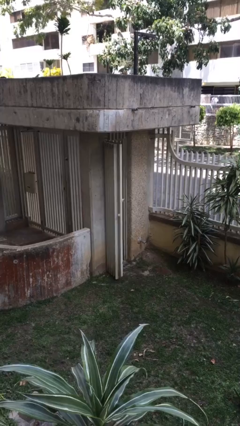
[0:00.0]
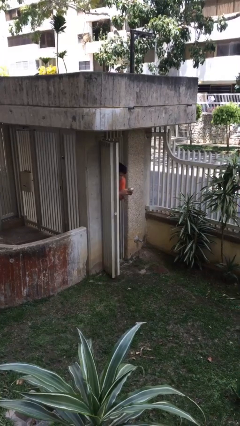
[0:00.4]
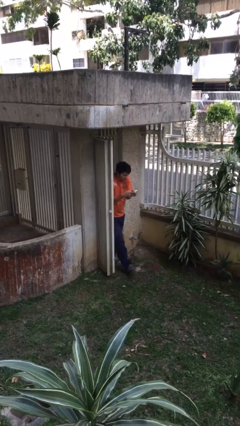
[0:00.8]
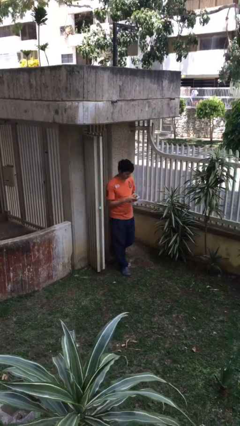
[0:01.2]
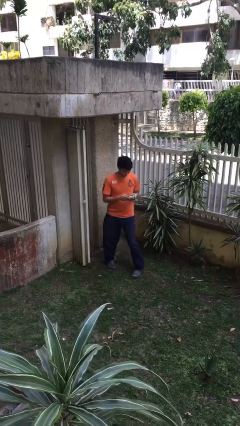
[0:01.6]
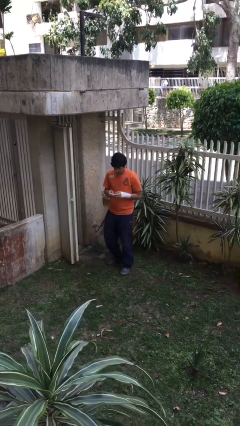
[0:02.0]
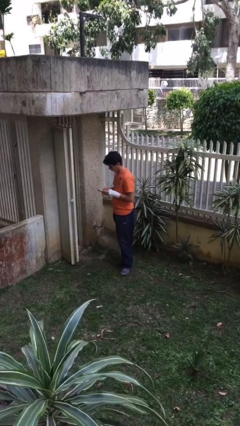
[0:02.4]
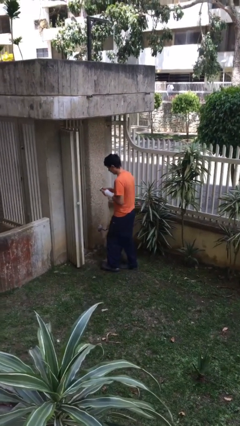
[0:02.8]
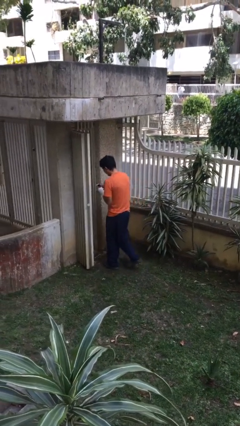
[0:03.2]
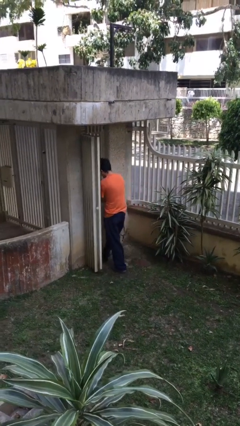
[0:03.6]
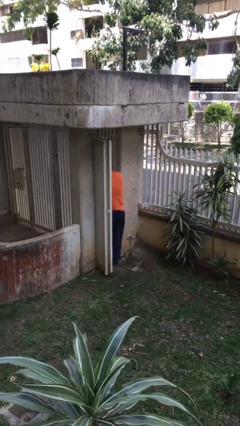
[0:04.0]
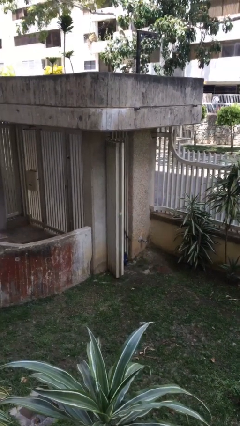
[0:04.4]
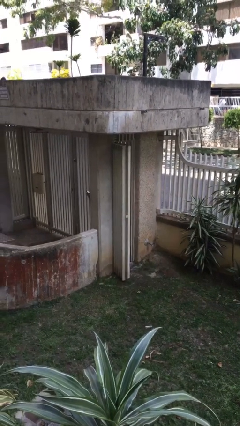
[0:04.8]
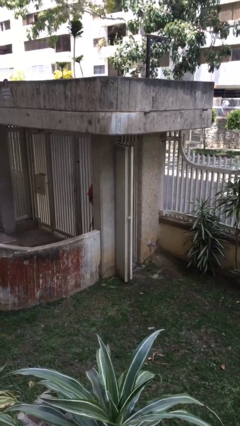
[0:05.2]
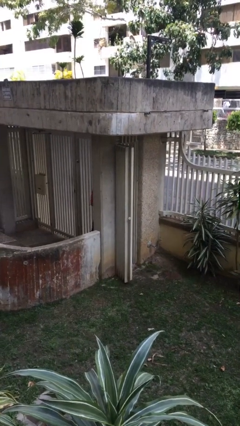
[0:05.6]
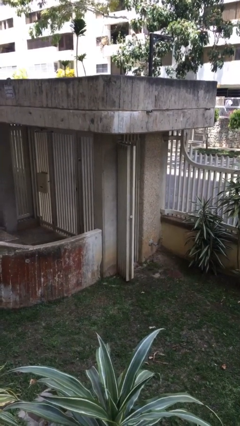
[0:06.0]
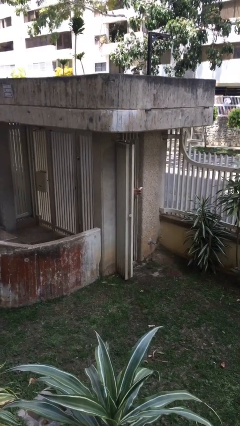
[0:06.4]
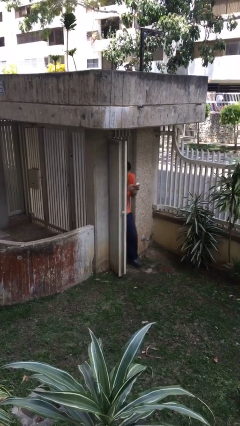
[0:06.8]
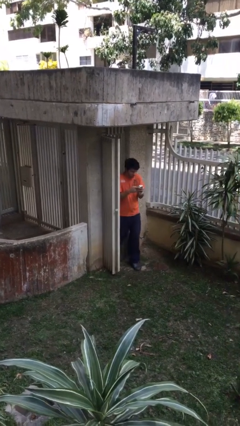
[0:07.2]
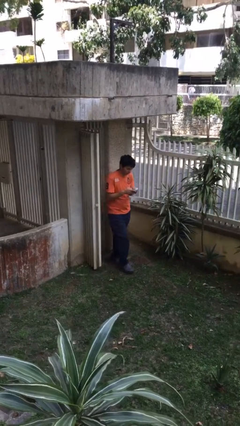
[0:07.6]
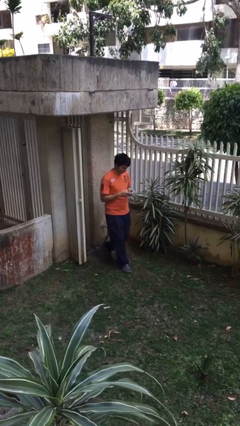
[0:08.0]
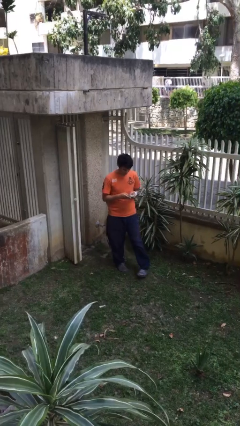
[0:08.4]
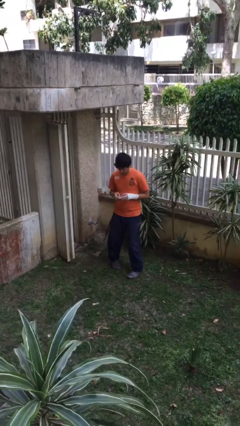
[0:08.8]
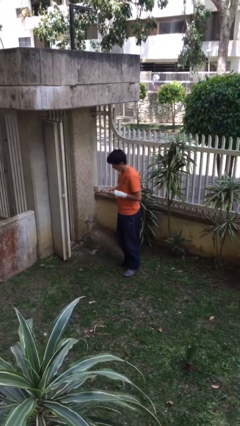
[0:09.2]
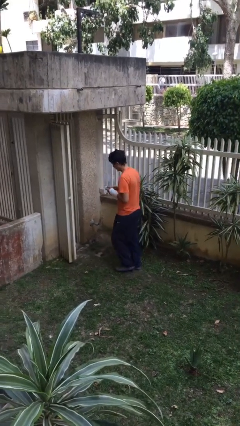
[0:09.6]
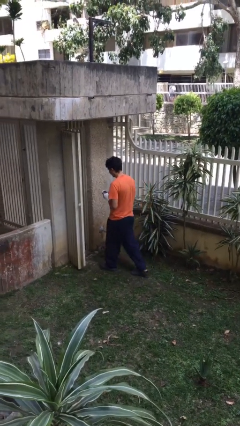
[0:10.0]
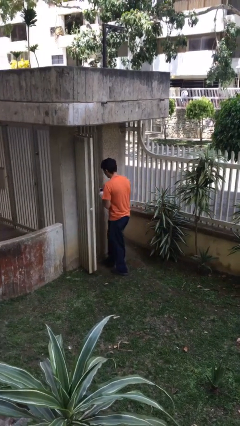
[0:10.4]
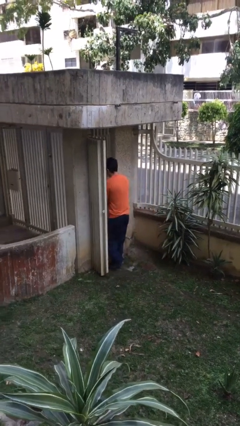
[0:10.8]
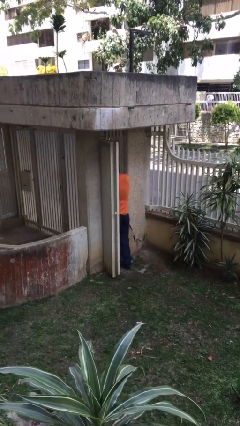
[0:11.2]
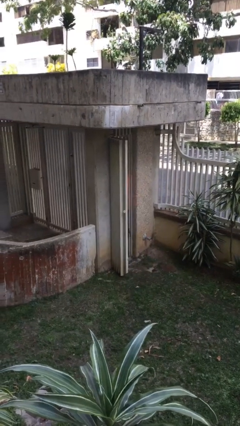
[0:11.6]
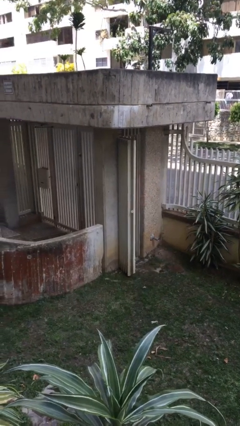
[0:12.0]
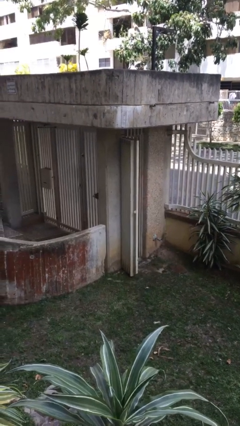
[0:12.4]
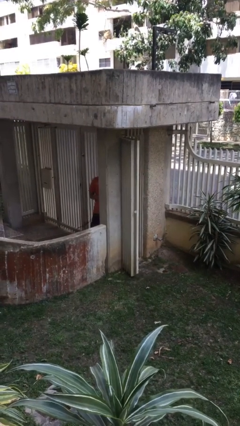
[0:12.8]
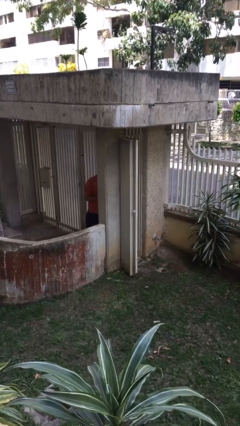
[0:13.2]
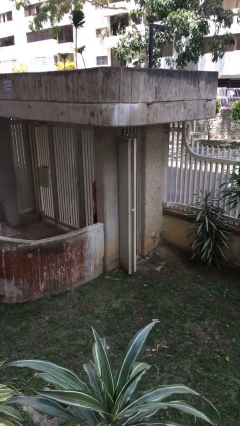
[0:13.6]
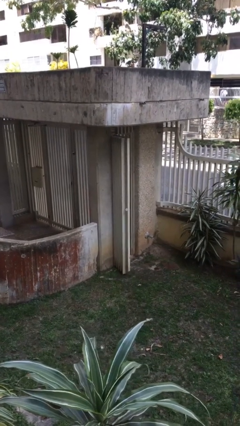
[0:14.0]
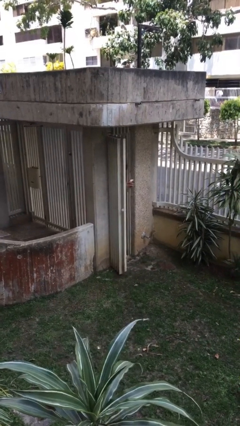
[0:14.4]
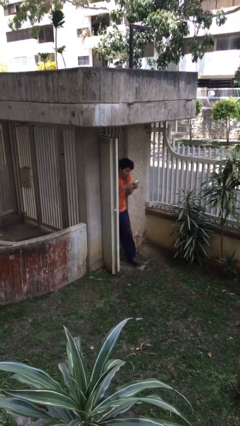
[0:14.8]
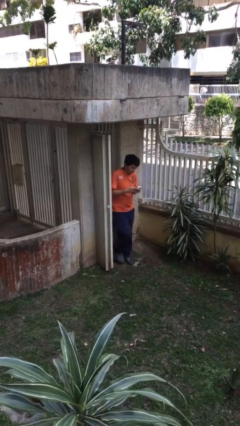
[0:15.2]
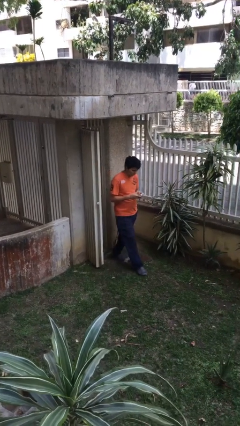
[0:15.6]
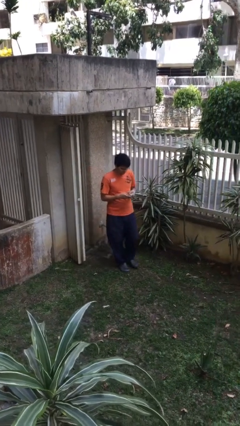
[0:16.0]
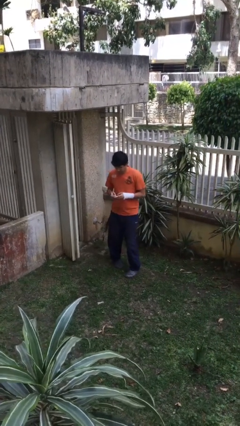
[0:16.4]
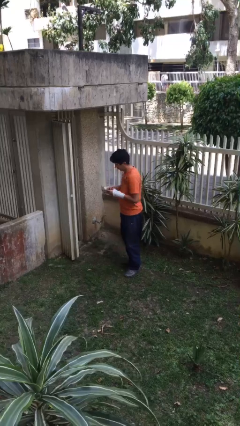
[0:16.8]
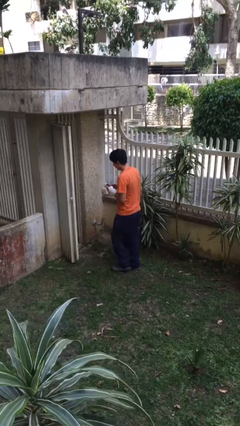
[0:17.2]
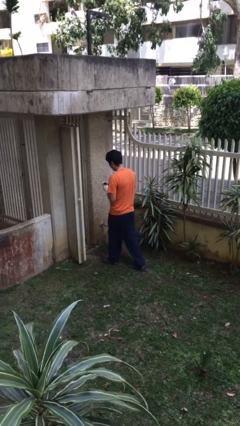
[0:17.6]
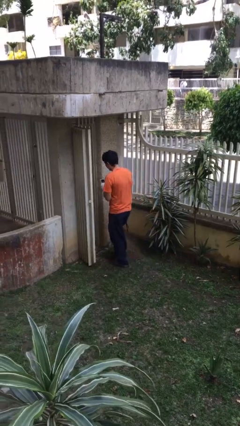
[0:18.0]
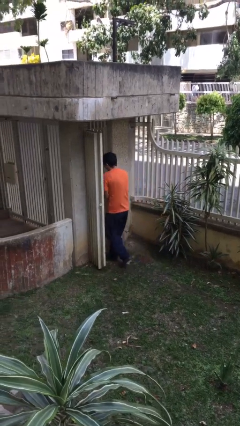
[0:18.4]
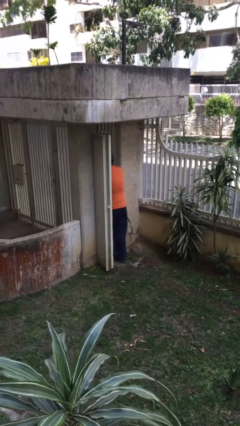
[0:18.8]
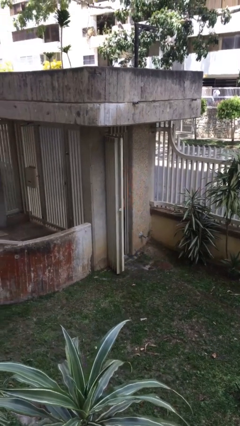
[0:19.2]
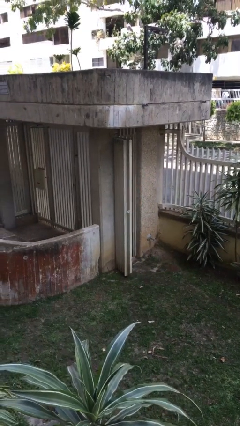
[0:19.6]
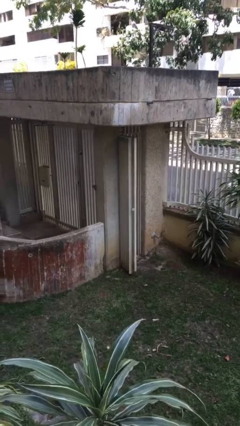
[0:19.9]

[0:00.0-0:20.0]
person texts on phone

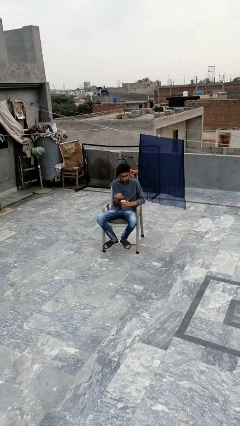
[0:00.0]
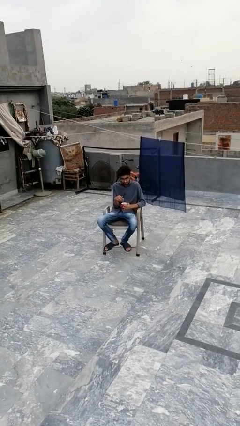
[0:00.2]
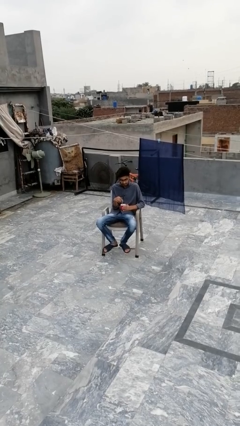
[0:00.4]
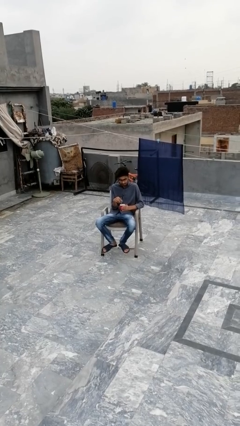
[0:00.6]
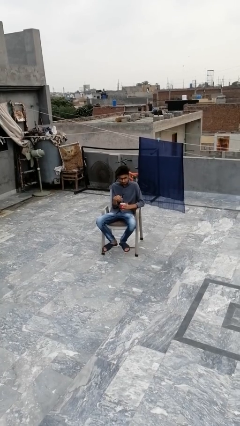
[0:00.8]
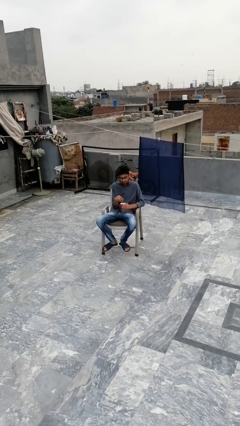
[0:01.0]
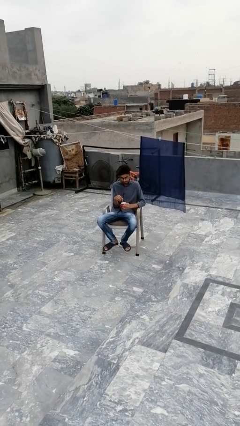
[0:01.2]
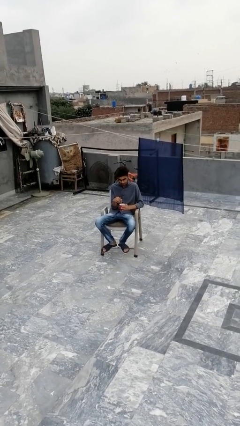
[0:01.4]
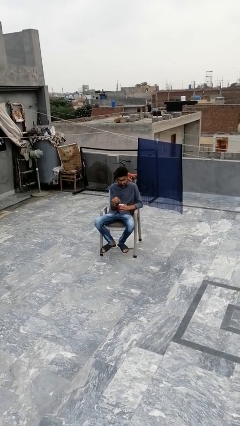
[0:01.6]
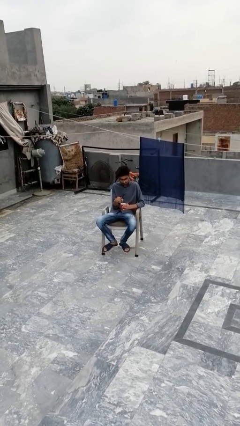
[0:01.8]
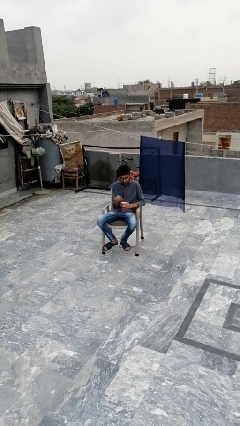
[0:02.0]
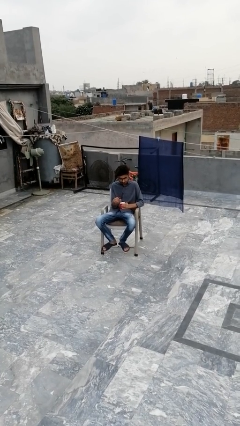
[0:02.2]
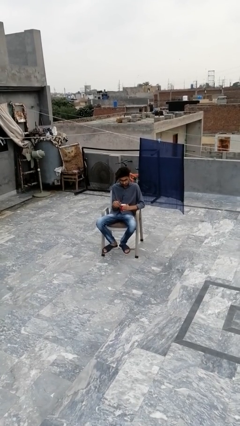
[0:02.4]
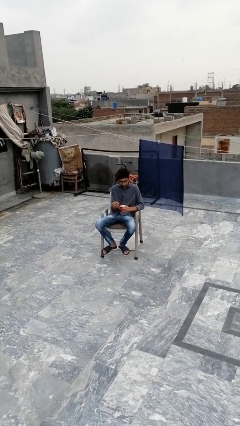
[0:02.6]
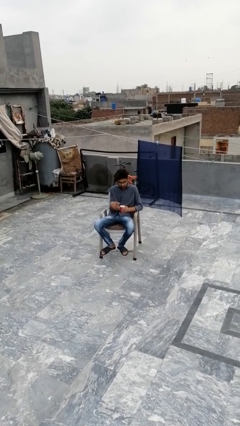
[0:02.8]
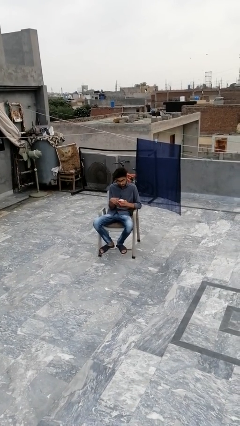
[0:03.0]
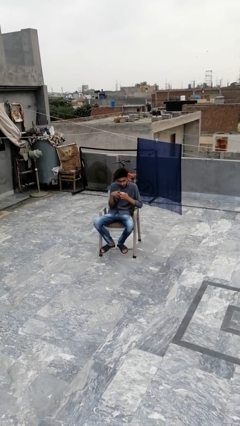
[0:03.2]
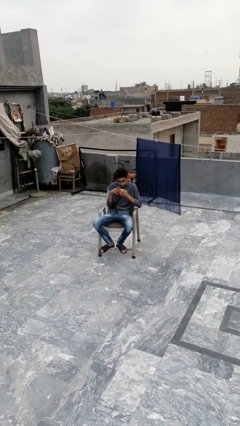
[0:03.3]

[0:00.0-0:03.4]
person stirs mug

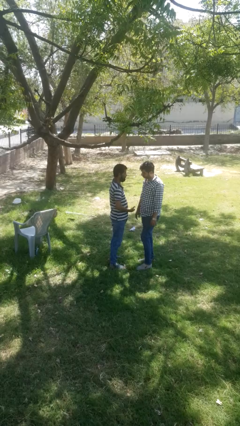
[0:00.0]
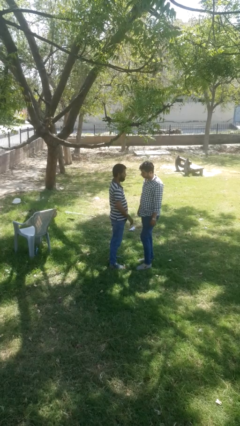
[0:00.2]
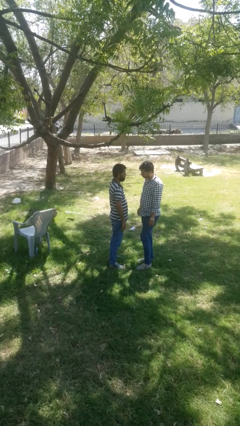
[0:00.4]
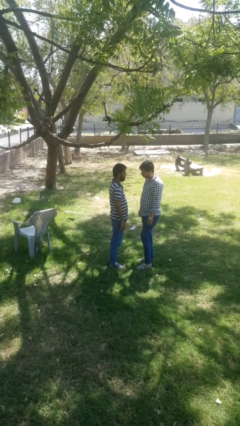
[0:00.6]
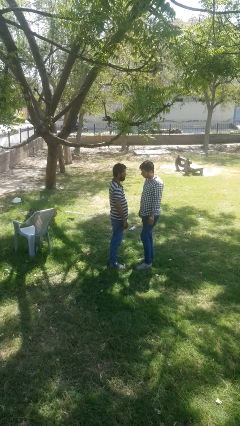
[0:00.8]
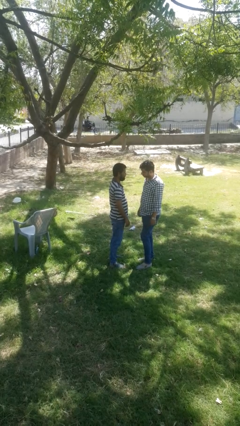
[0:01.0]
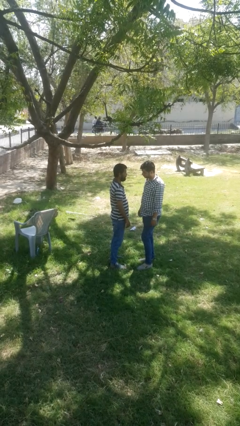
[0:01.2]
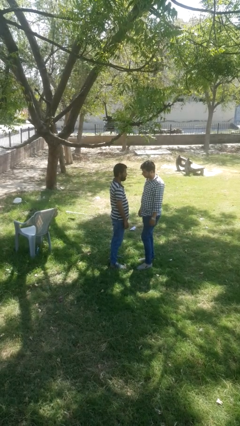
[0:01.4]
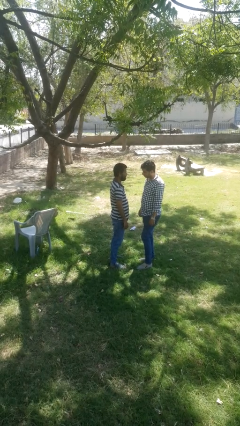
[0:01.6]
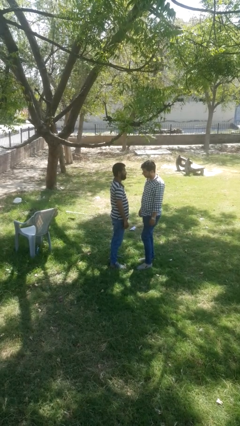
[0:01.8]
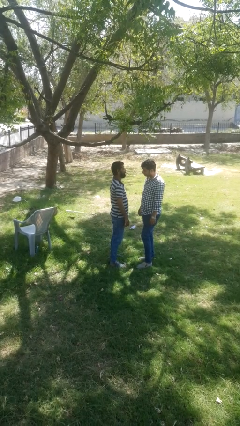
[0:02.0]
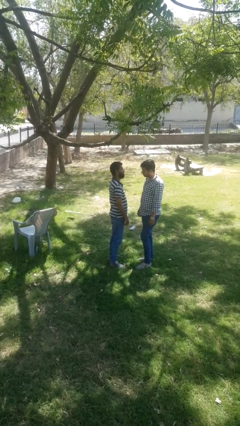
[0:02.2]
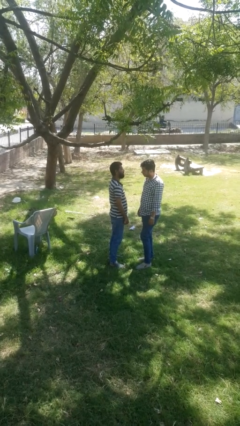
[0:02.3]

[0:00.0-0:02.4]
person highfives hand

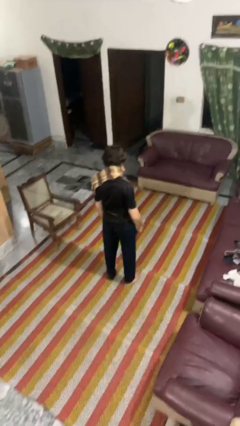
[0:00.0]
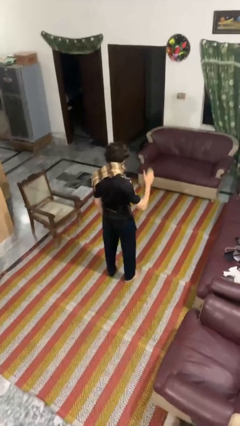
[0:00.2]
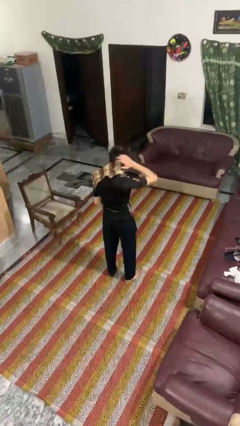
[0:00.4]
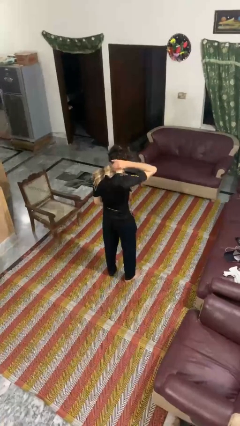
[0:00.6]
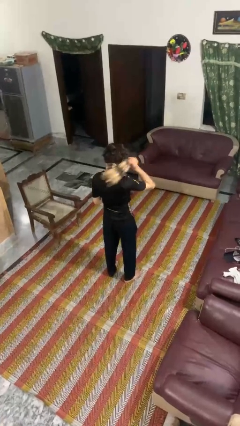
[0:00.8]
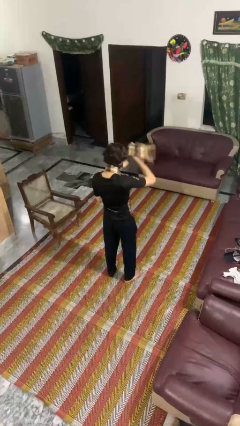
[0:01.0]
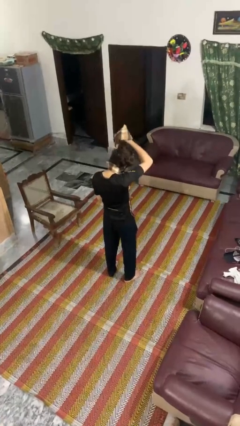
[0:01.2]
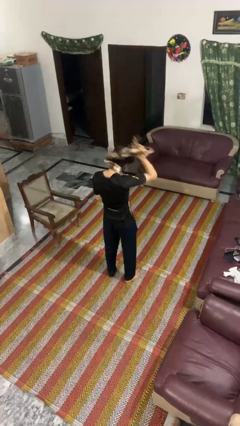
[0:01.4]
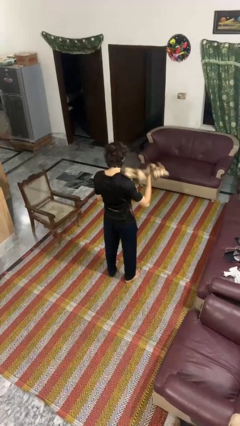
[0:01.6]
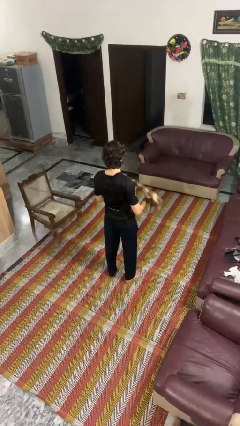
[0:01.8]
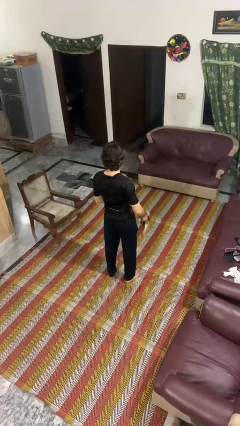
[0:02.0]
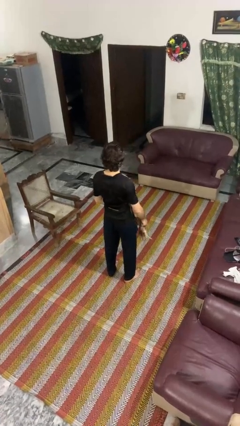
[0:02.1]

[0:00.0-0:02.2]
person takes off scarf
